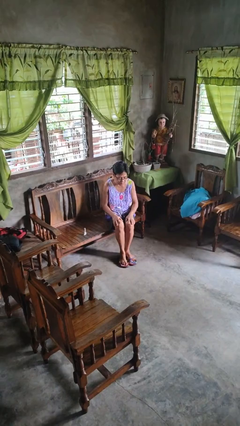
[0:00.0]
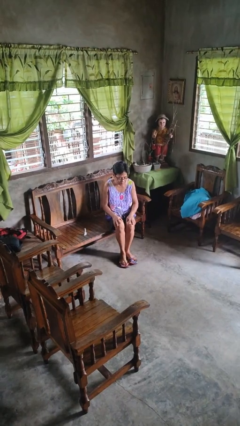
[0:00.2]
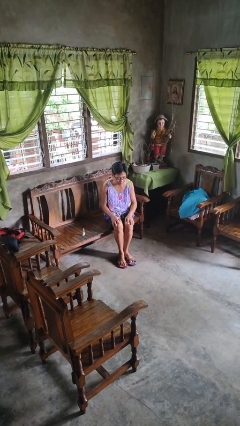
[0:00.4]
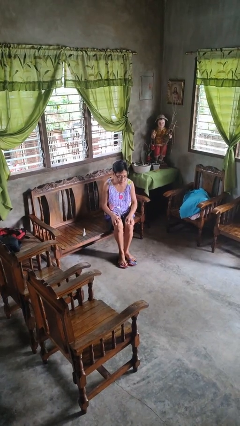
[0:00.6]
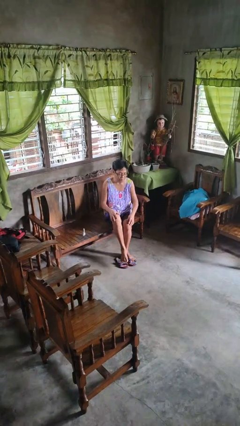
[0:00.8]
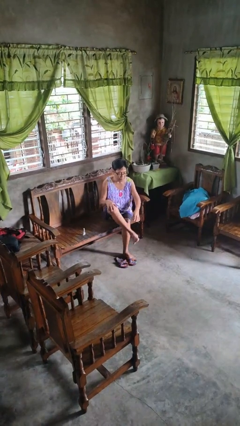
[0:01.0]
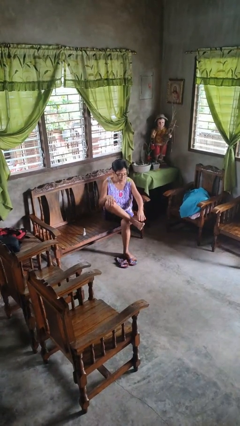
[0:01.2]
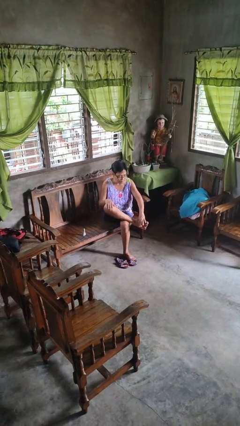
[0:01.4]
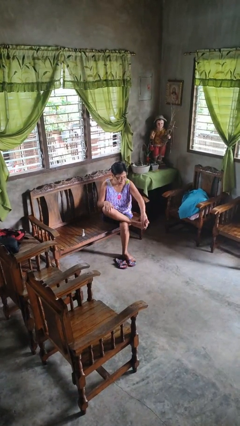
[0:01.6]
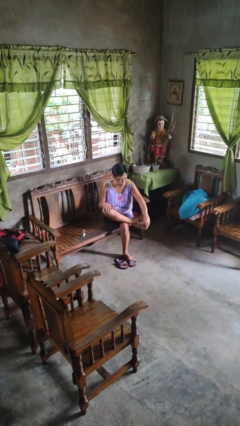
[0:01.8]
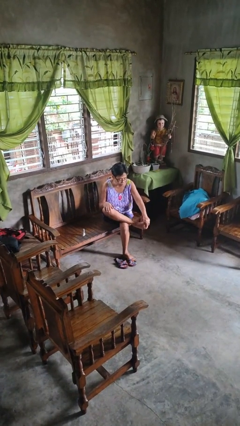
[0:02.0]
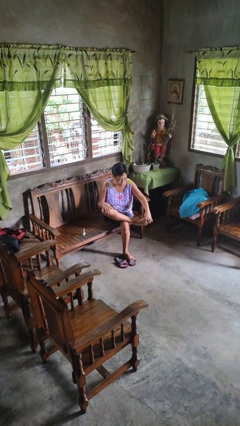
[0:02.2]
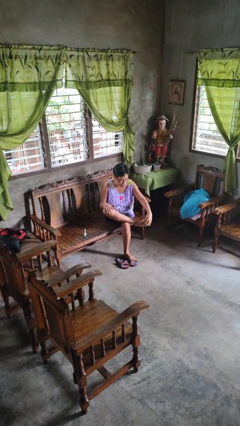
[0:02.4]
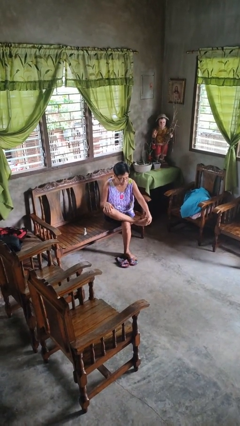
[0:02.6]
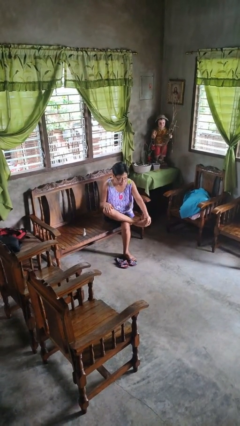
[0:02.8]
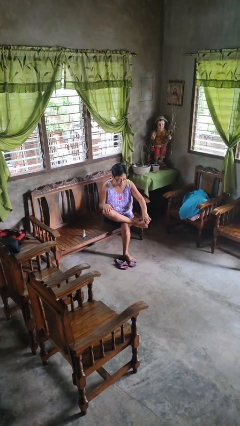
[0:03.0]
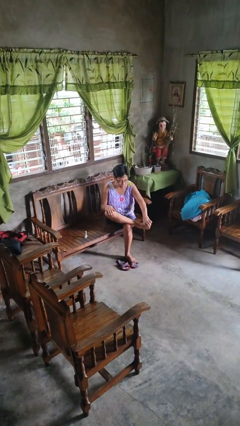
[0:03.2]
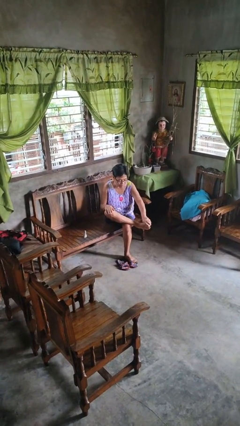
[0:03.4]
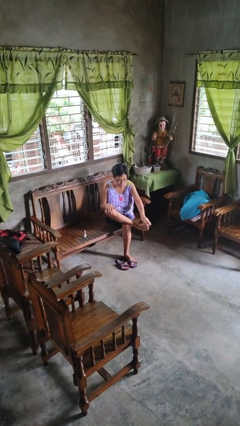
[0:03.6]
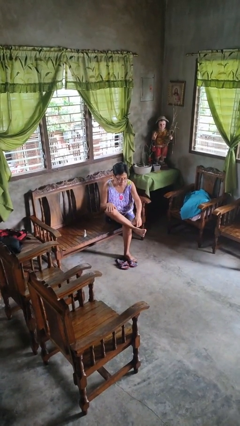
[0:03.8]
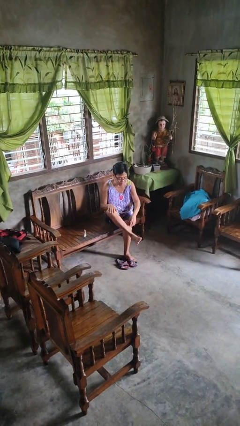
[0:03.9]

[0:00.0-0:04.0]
person rubs foot

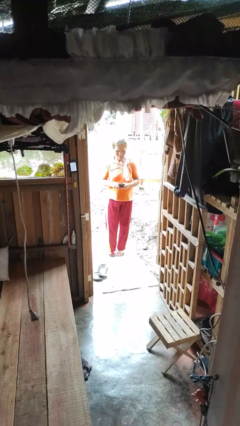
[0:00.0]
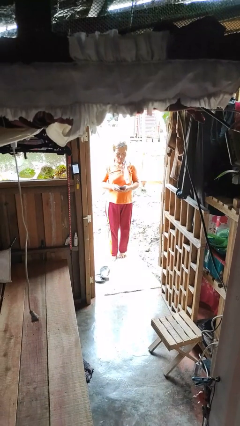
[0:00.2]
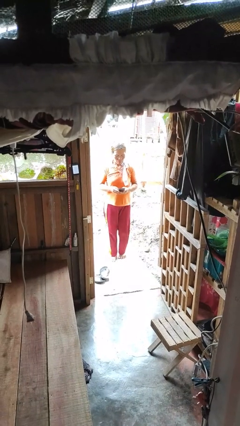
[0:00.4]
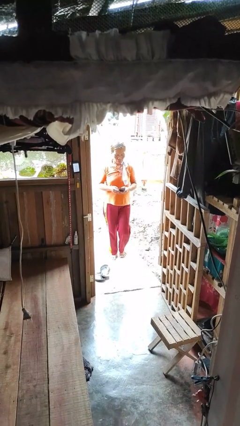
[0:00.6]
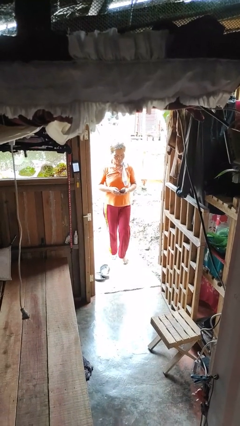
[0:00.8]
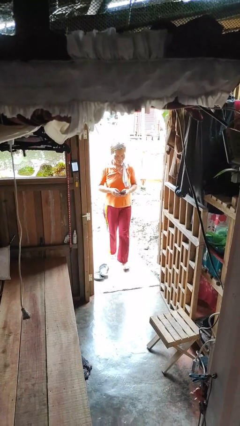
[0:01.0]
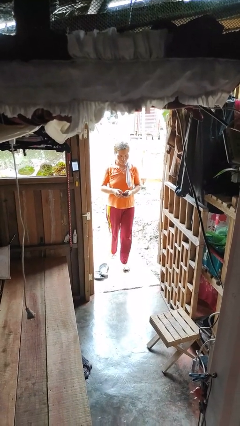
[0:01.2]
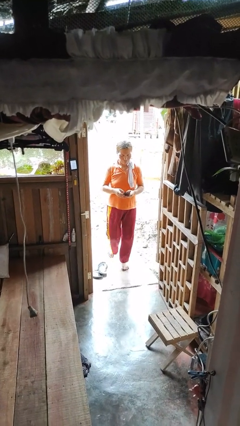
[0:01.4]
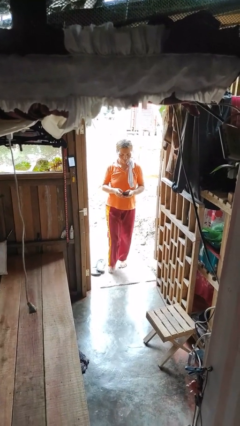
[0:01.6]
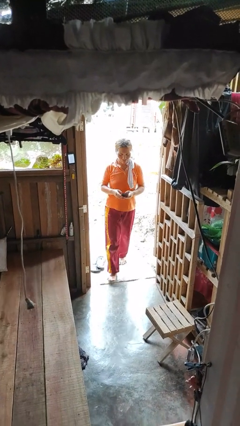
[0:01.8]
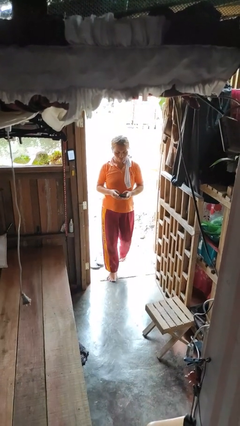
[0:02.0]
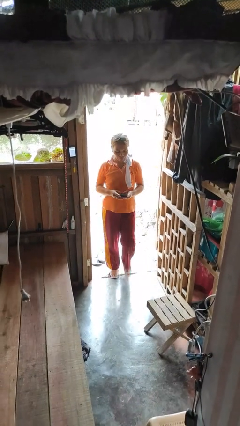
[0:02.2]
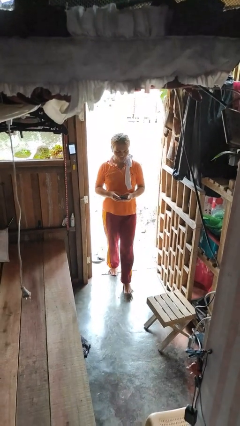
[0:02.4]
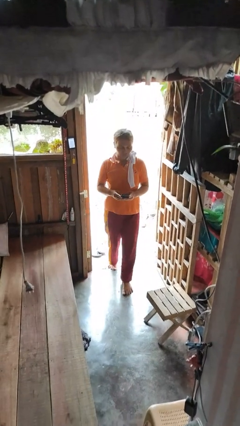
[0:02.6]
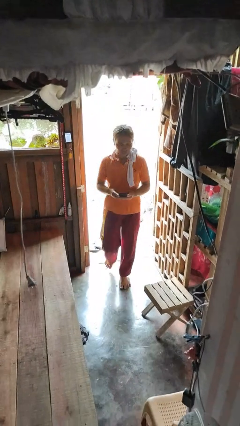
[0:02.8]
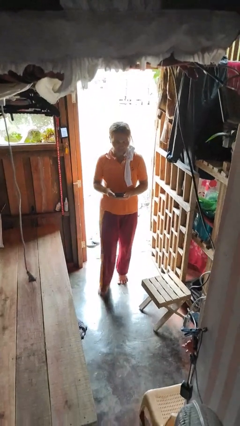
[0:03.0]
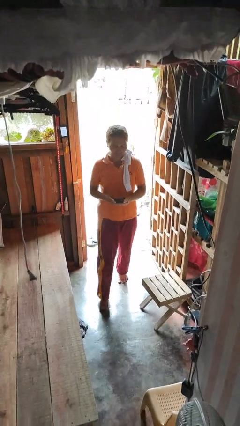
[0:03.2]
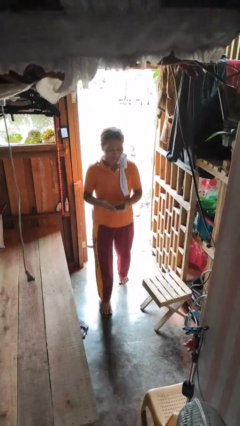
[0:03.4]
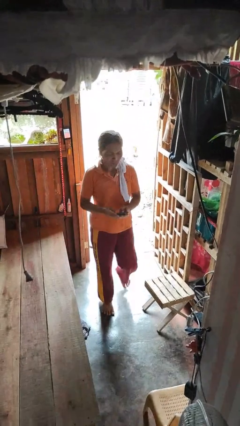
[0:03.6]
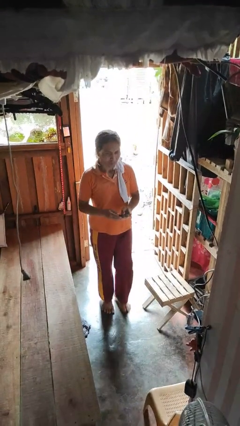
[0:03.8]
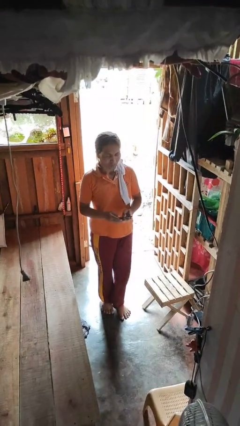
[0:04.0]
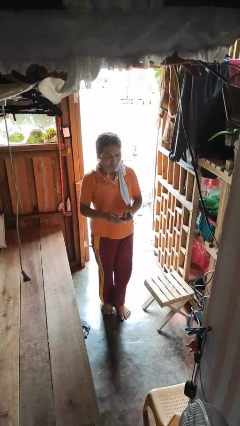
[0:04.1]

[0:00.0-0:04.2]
person enters scene through structure

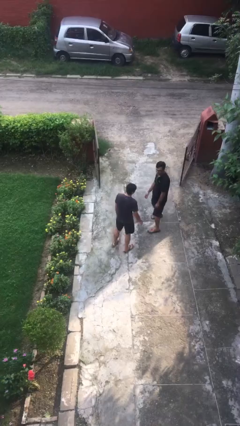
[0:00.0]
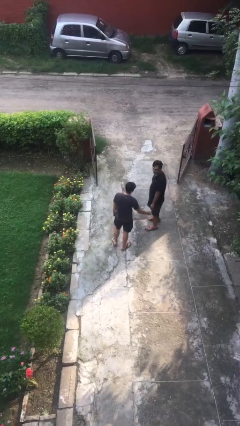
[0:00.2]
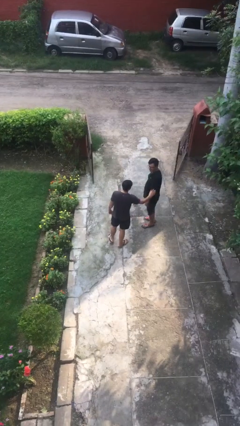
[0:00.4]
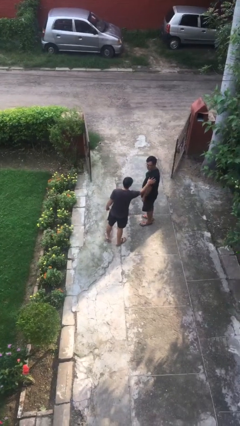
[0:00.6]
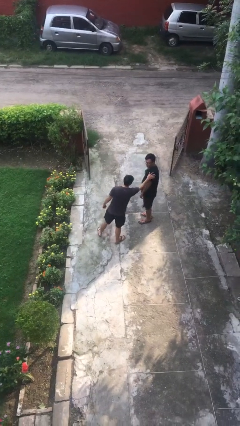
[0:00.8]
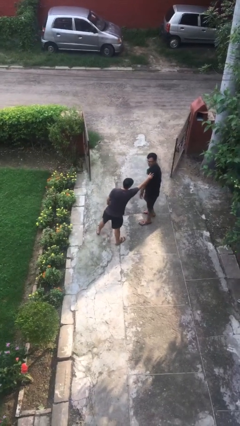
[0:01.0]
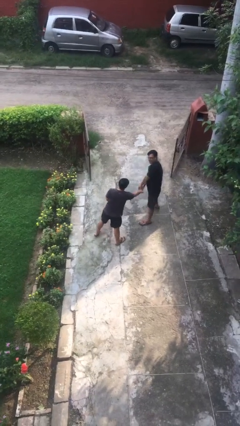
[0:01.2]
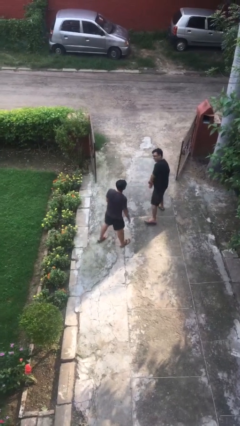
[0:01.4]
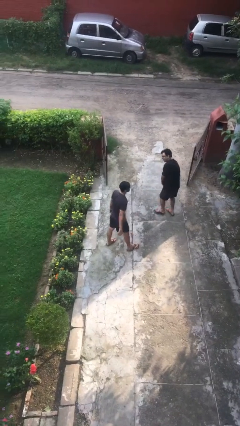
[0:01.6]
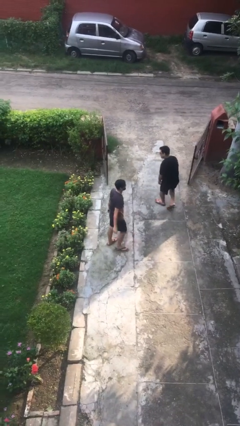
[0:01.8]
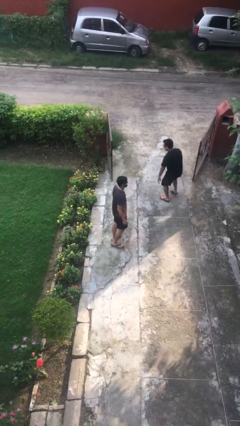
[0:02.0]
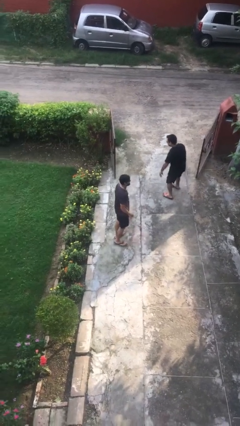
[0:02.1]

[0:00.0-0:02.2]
person shoves person

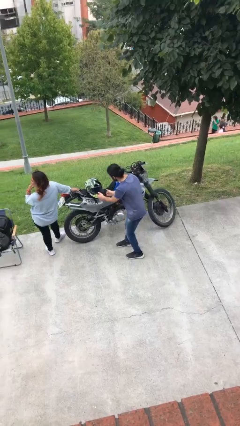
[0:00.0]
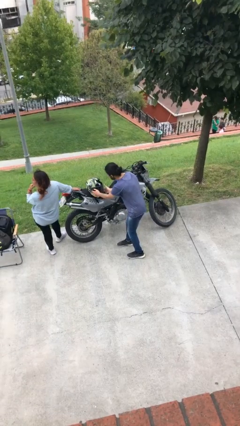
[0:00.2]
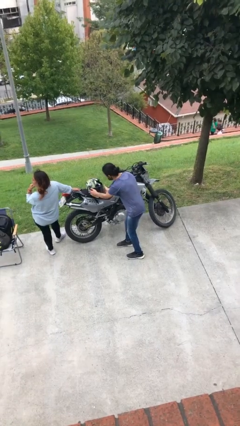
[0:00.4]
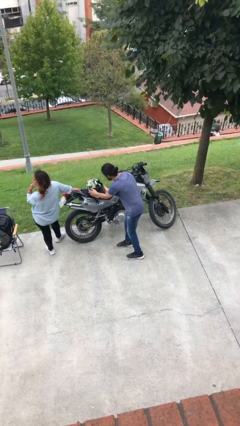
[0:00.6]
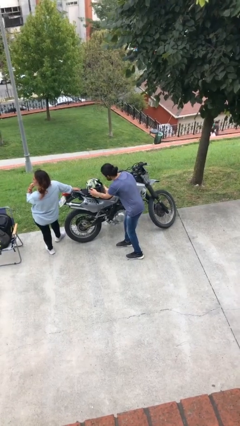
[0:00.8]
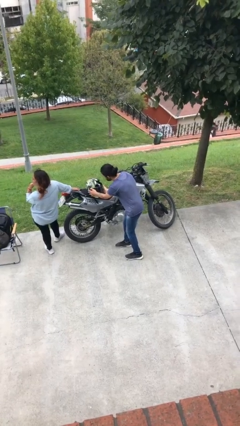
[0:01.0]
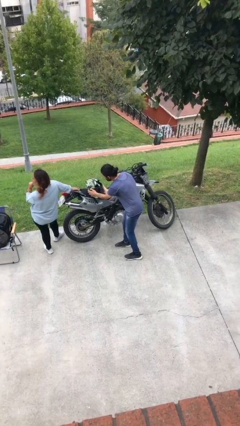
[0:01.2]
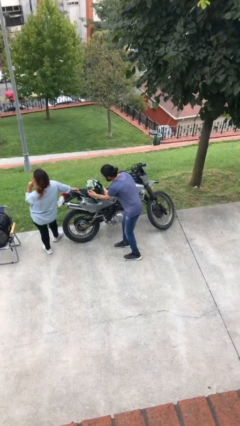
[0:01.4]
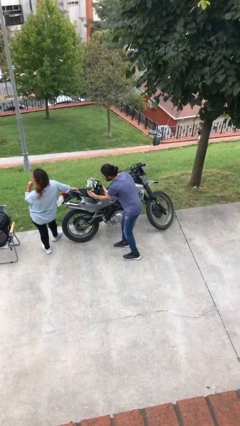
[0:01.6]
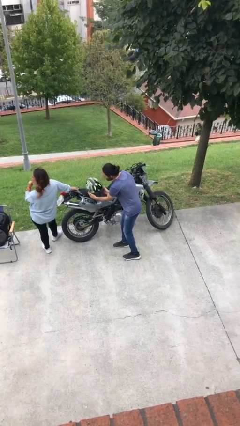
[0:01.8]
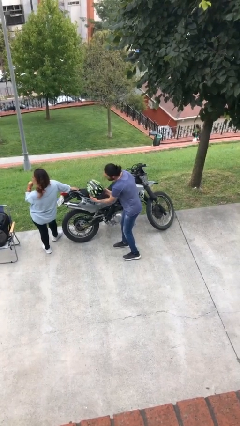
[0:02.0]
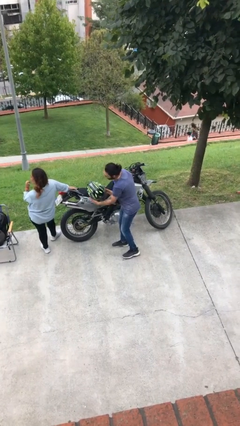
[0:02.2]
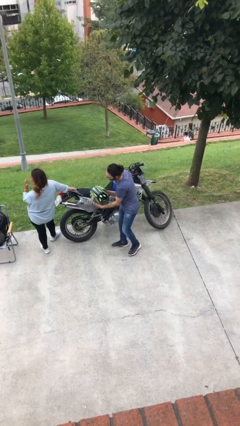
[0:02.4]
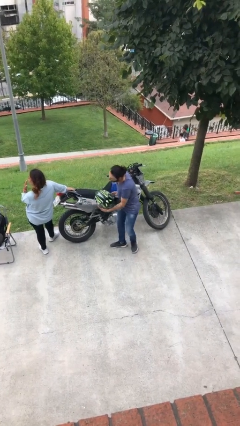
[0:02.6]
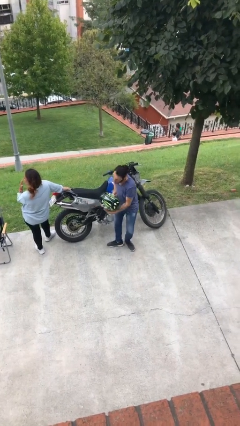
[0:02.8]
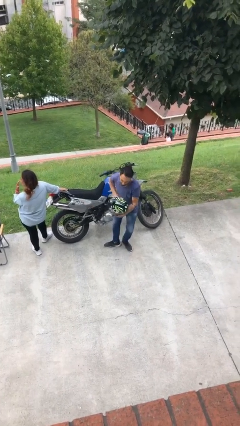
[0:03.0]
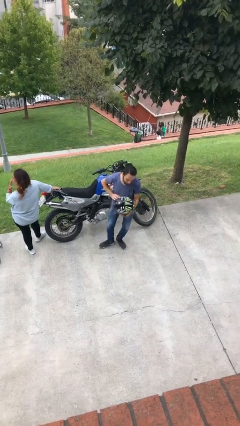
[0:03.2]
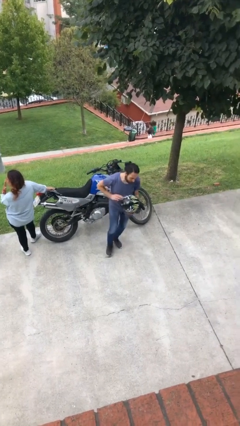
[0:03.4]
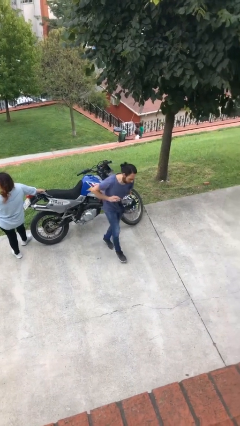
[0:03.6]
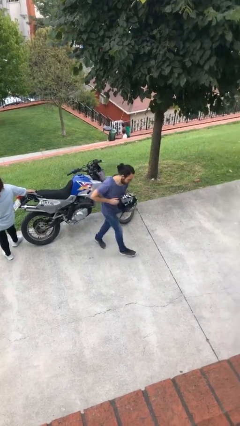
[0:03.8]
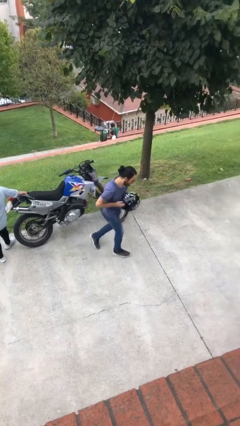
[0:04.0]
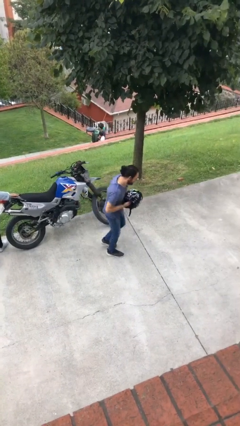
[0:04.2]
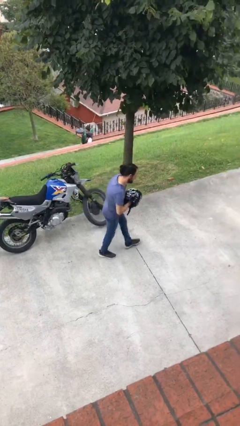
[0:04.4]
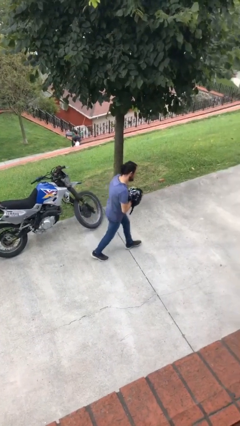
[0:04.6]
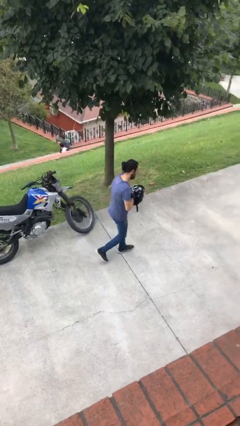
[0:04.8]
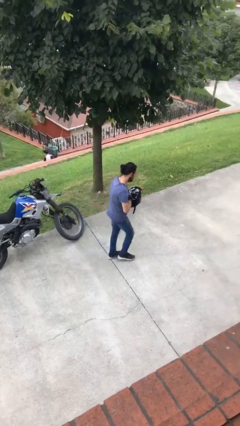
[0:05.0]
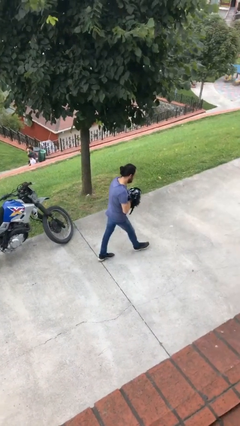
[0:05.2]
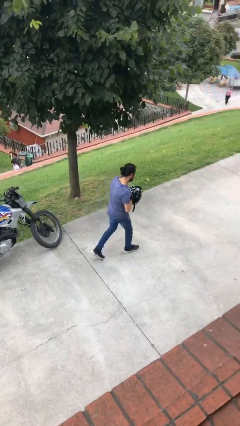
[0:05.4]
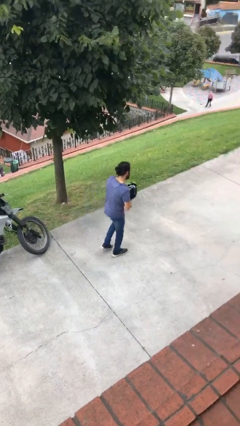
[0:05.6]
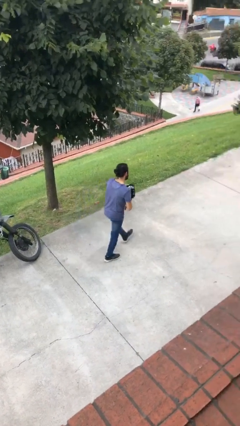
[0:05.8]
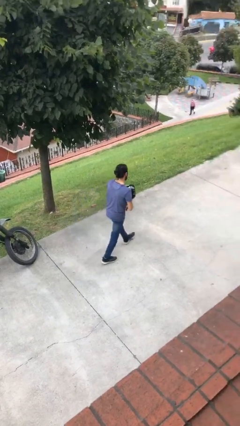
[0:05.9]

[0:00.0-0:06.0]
person steals object from person

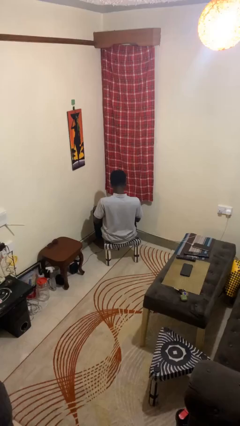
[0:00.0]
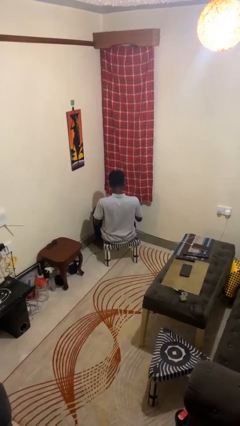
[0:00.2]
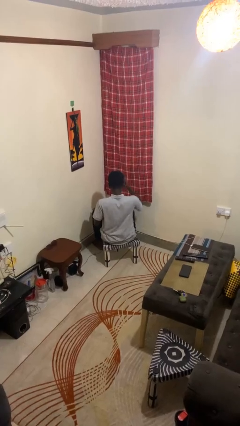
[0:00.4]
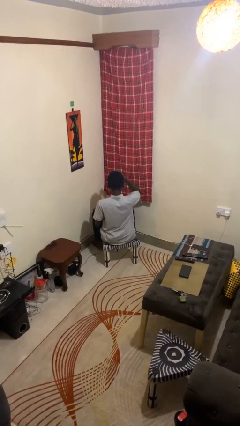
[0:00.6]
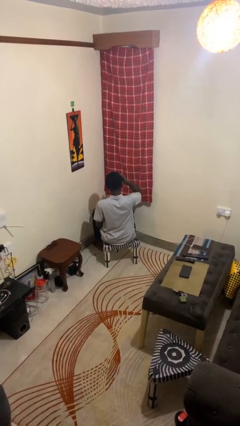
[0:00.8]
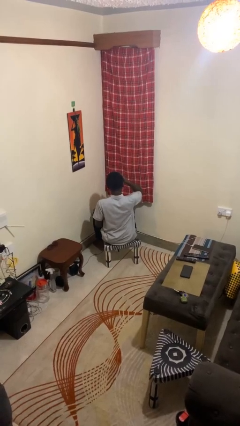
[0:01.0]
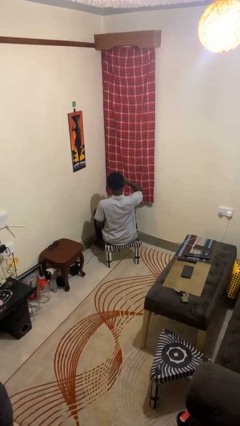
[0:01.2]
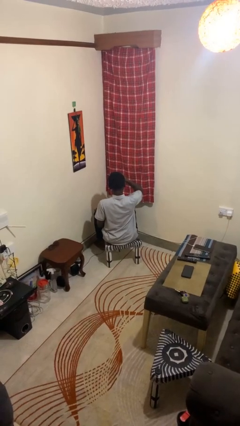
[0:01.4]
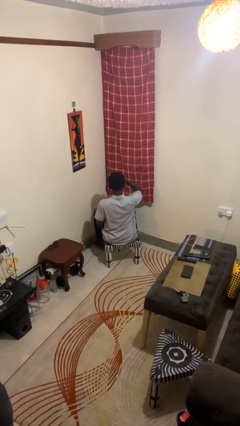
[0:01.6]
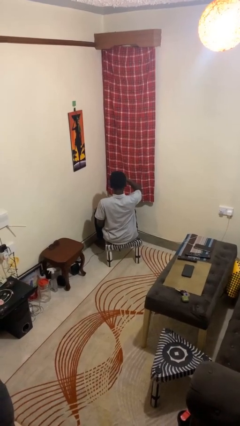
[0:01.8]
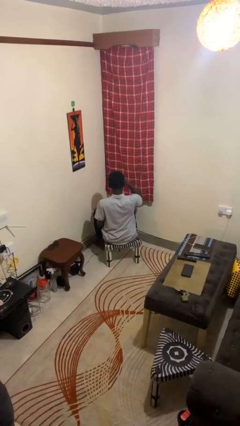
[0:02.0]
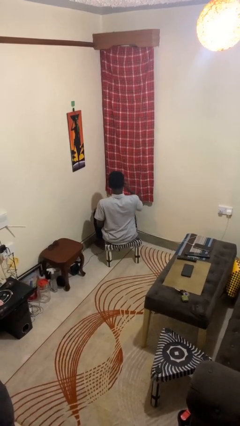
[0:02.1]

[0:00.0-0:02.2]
person scratches face
